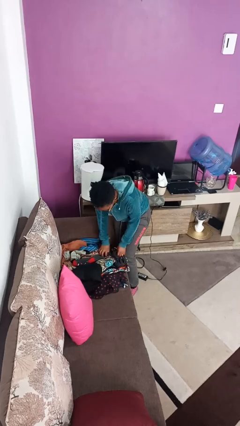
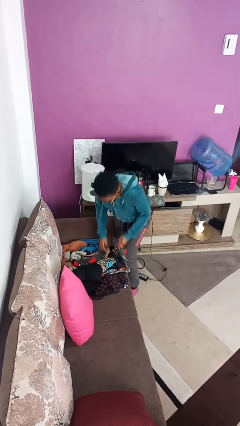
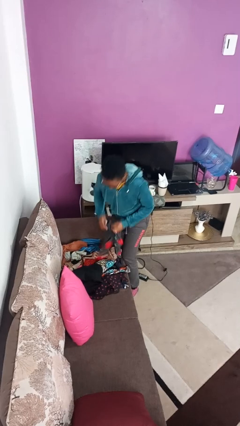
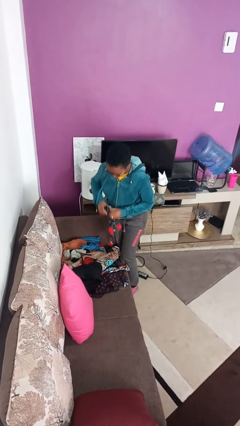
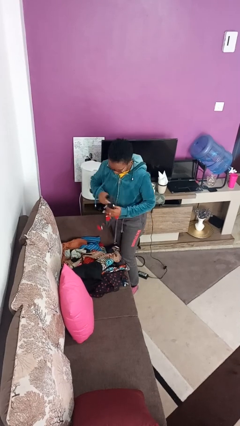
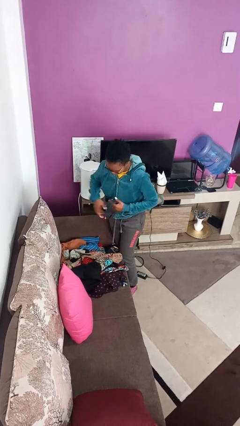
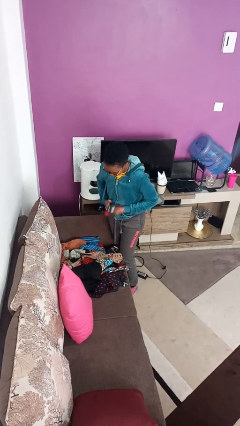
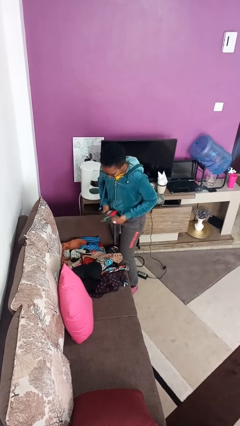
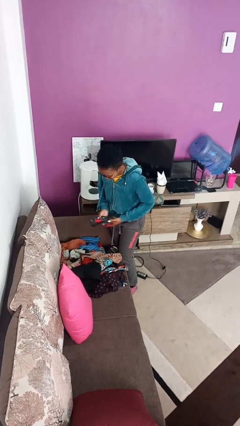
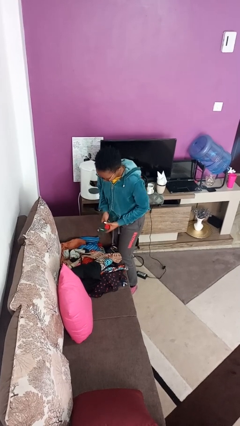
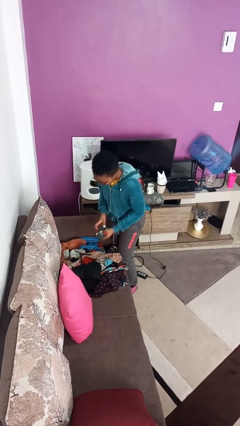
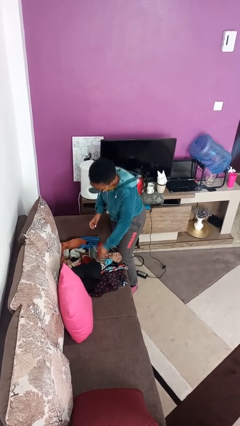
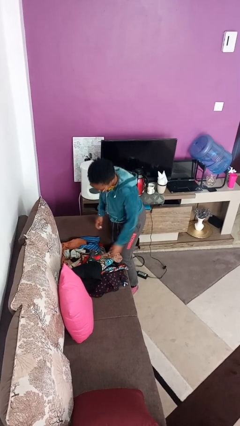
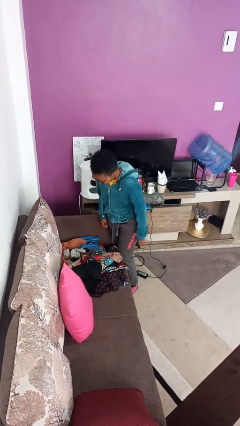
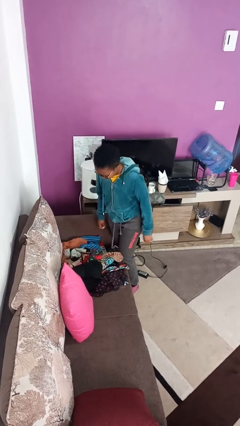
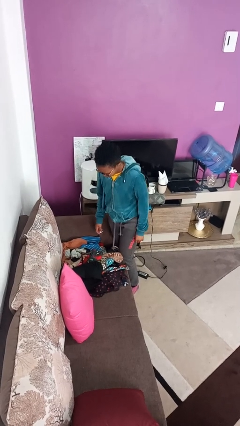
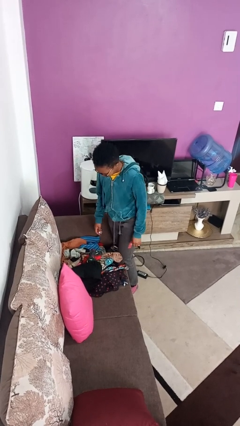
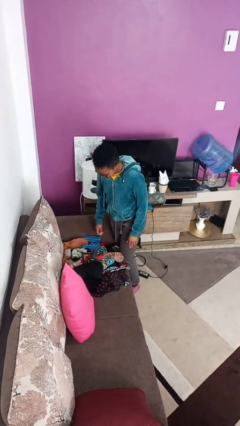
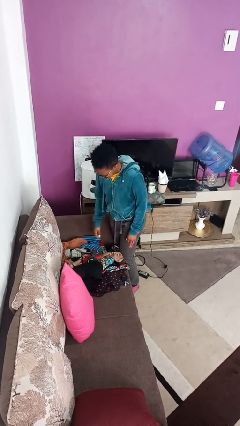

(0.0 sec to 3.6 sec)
person folds socks

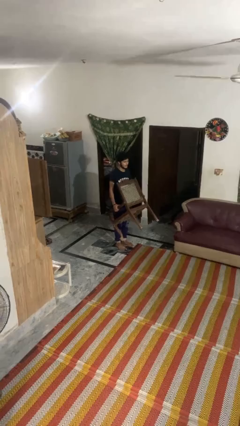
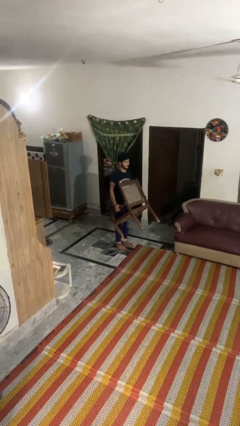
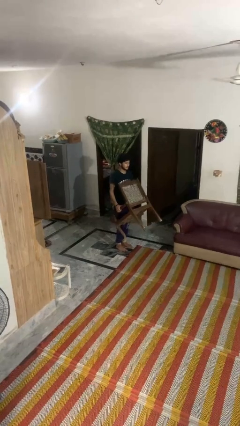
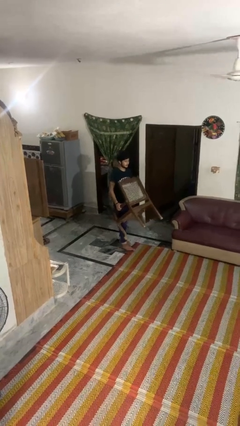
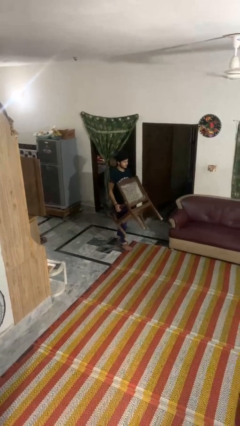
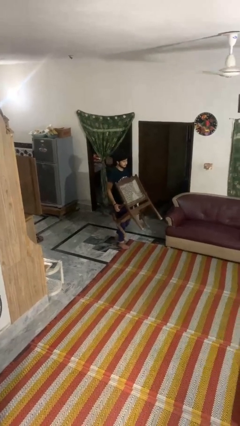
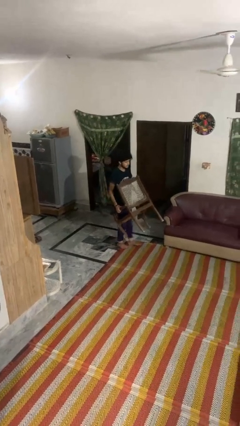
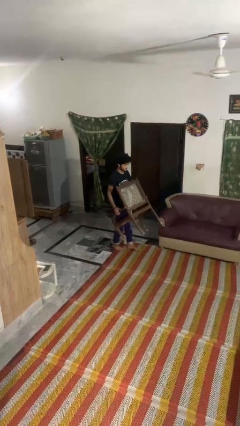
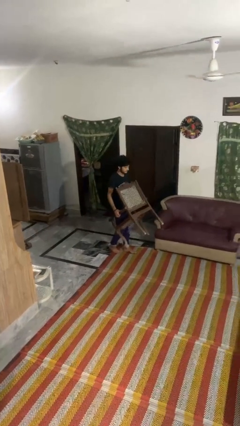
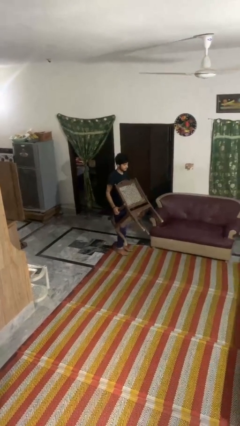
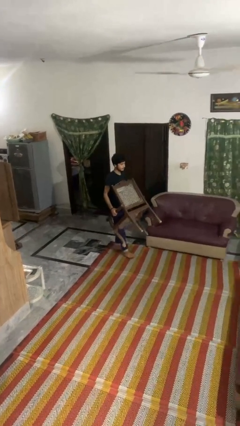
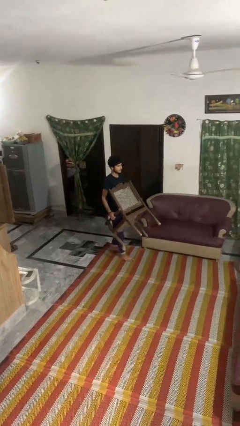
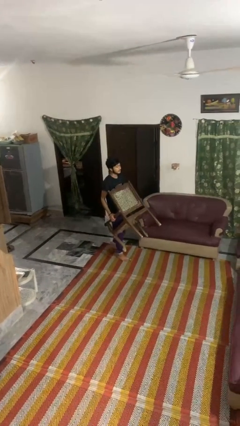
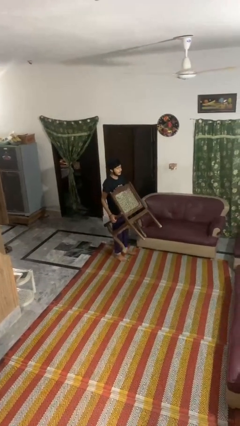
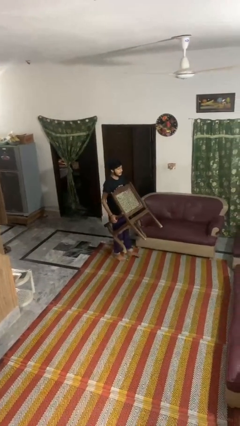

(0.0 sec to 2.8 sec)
person carries furniture

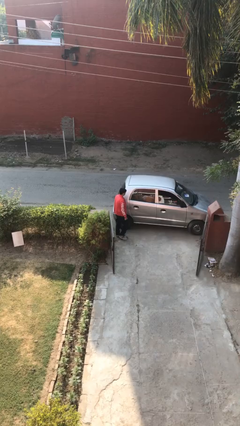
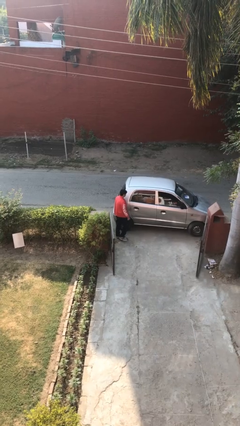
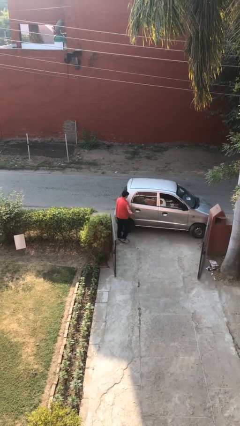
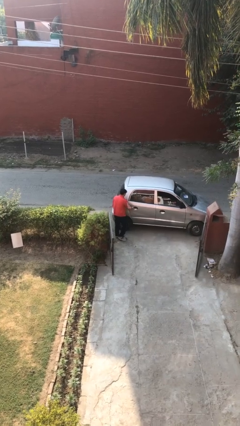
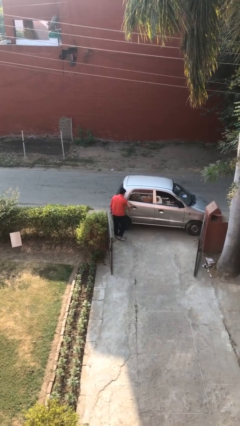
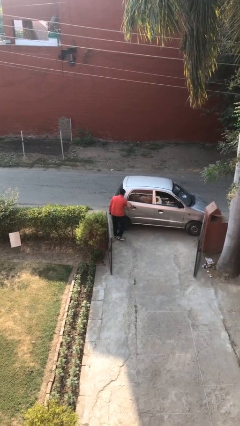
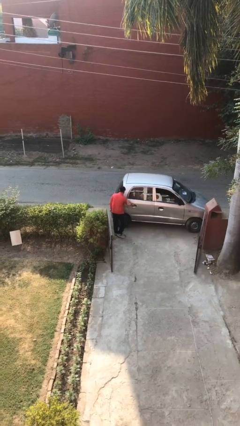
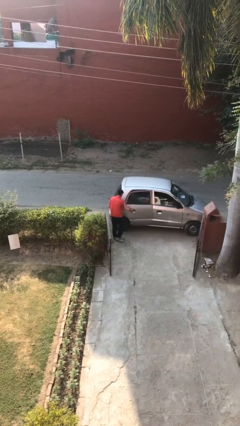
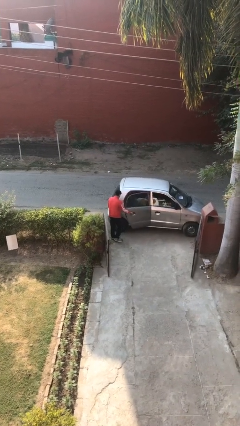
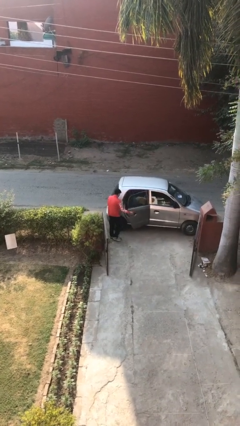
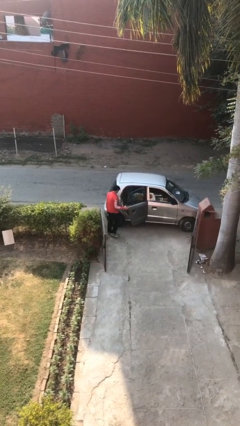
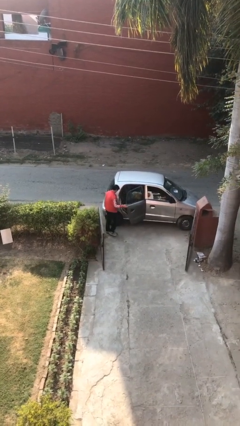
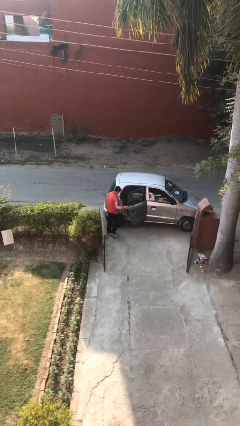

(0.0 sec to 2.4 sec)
person opens car door

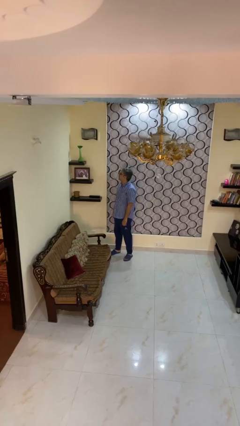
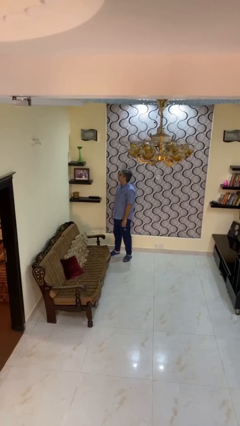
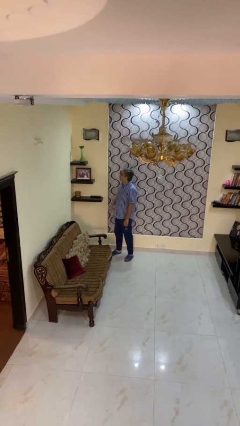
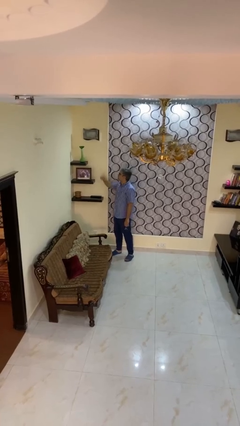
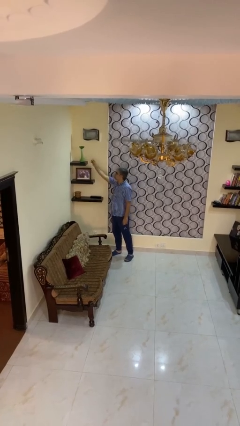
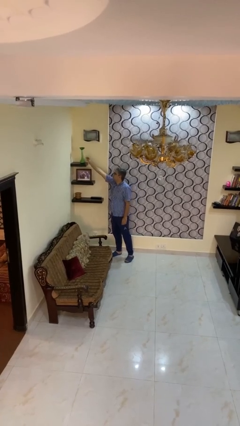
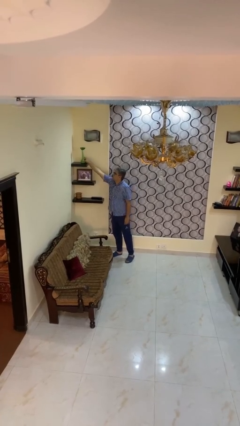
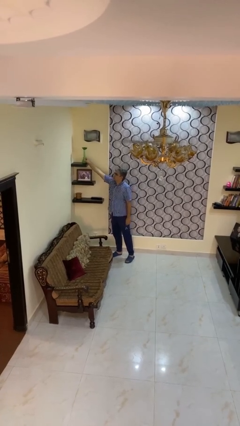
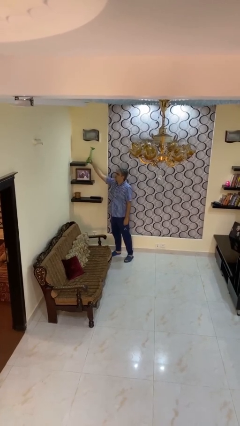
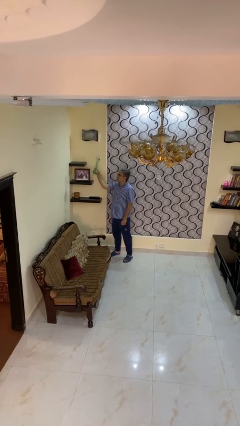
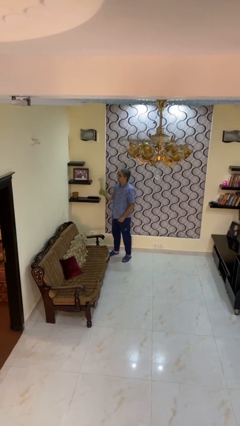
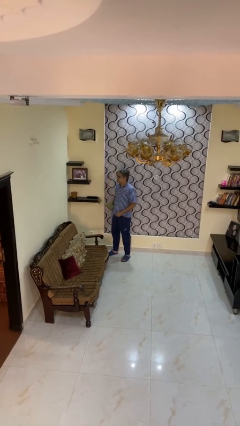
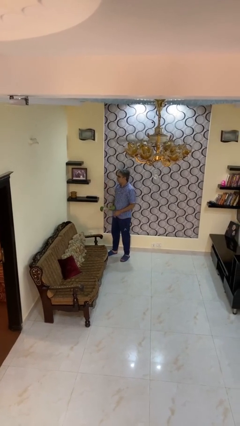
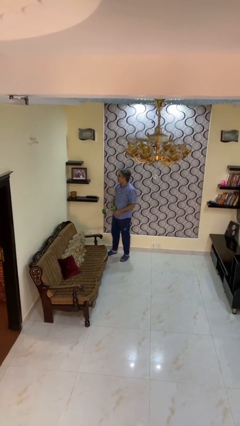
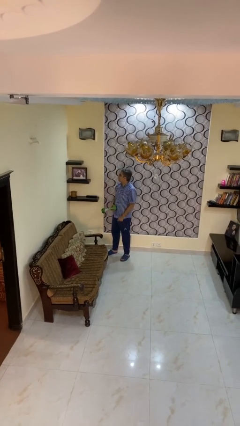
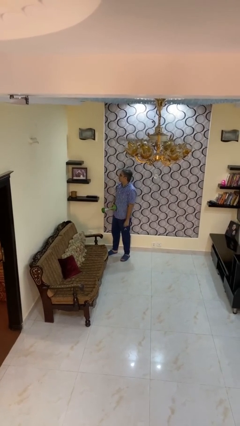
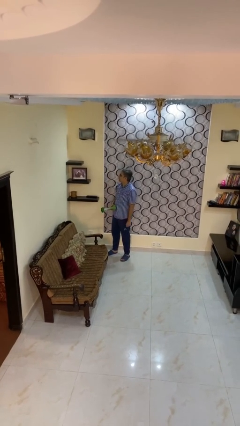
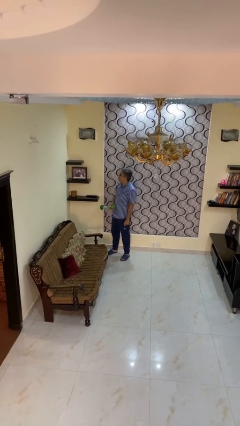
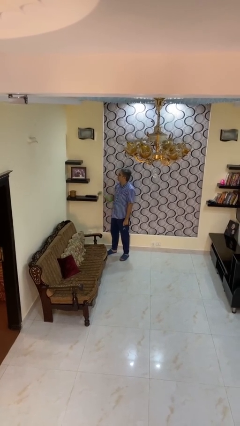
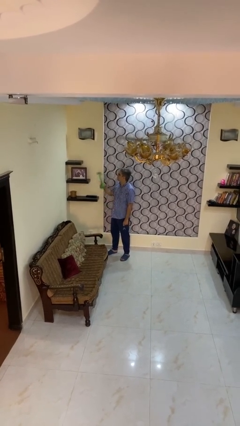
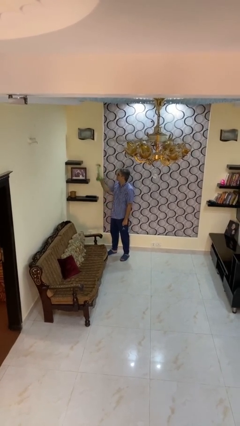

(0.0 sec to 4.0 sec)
person picks up object from shelf

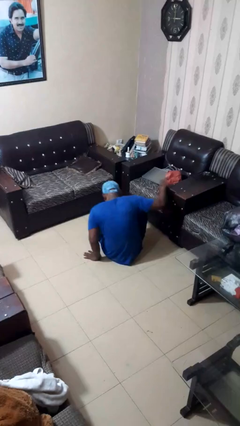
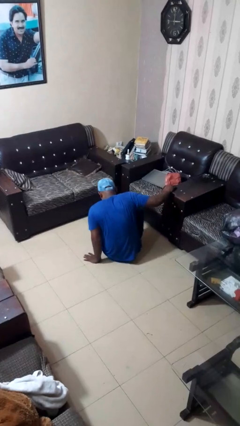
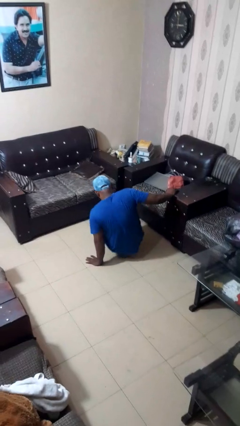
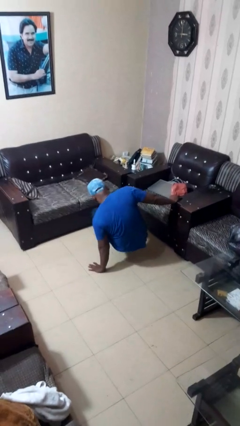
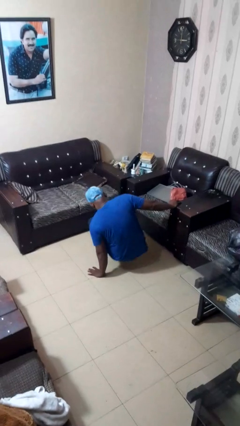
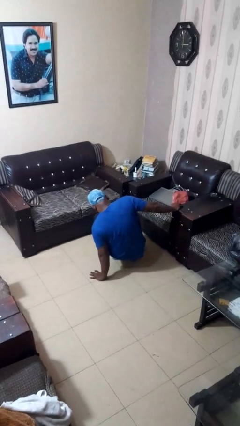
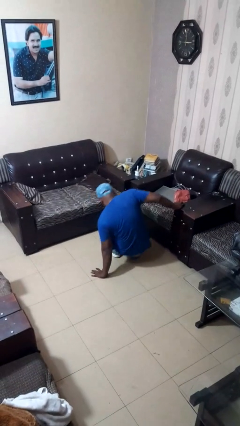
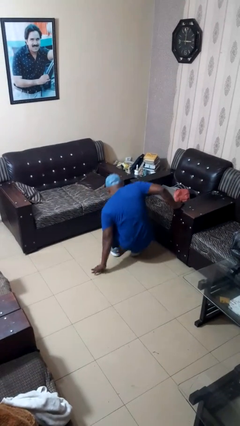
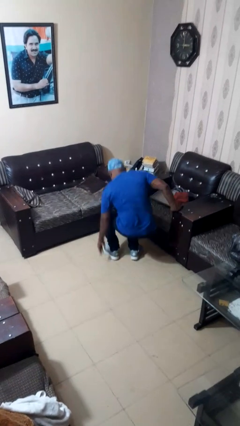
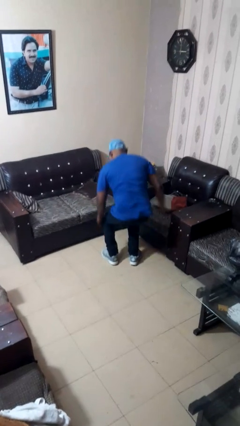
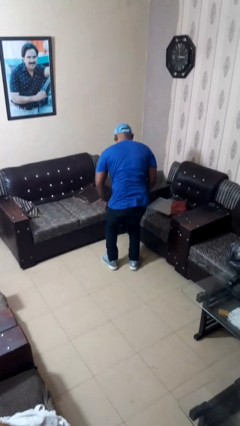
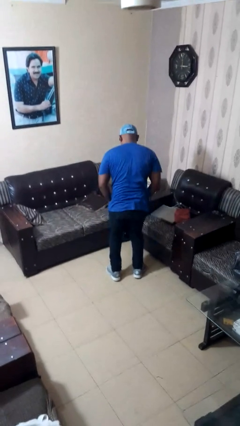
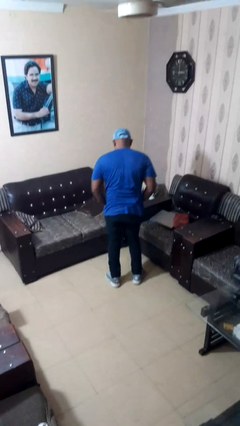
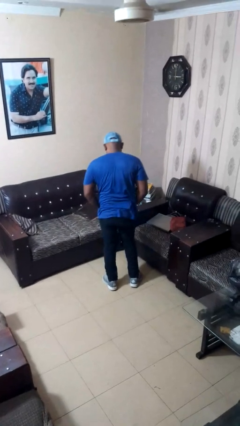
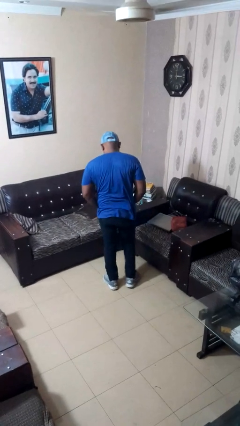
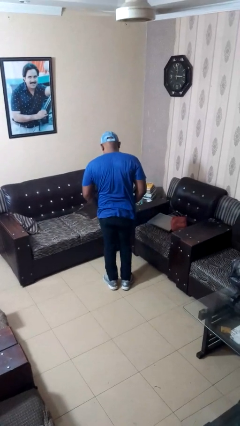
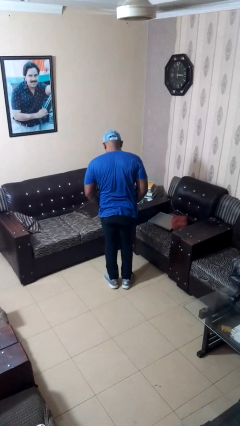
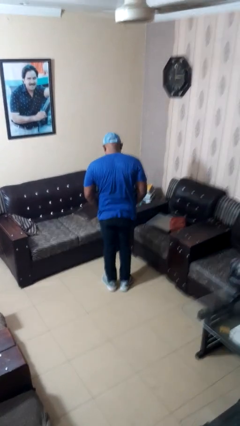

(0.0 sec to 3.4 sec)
person stands up from floor

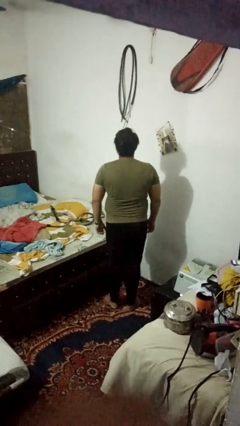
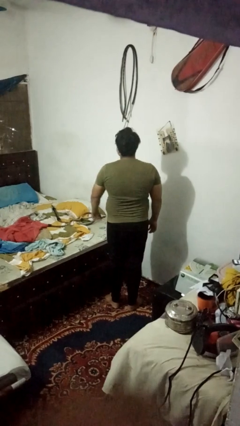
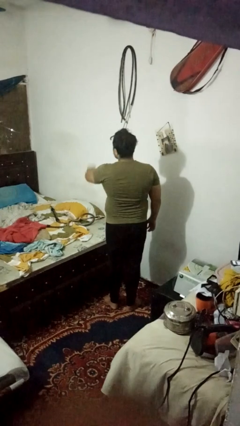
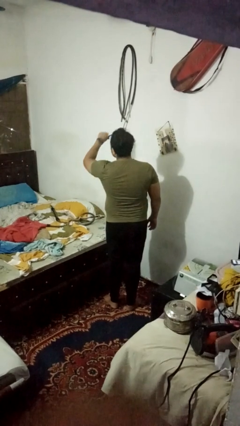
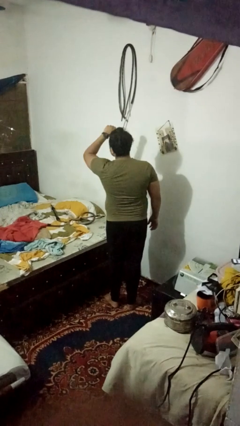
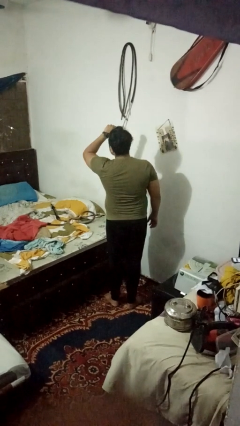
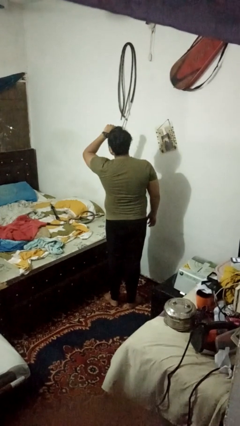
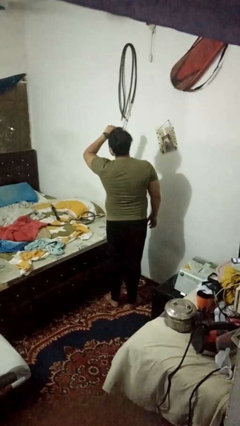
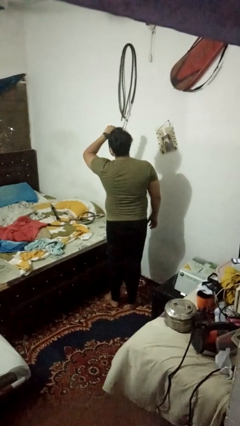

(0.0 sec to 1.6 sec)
person gestures watch closely
